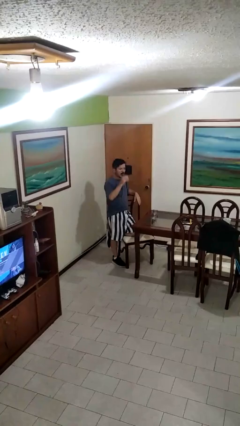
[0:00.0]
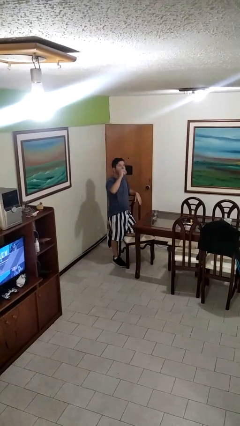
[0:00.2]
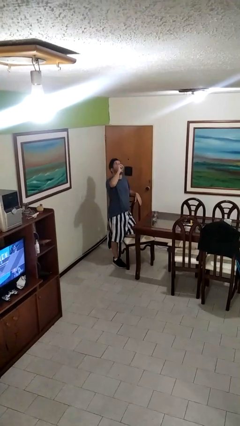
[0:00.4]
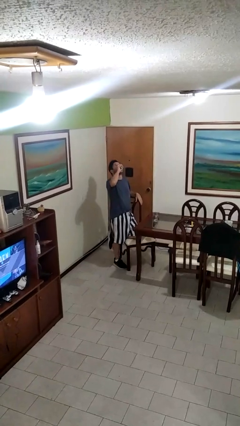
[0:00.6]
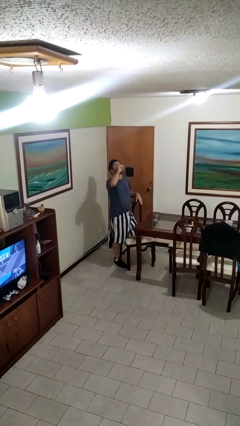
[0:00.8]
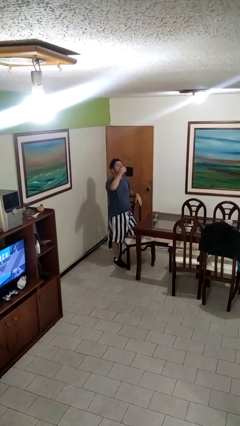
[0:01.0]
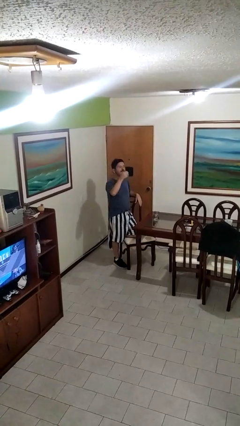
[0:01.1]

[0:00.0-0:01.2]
person drinks from shotglass

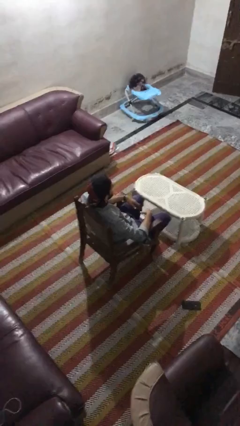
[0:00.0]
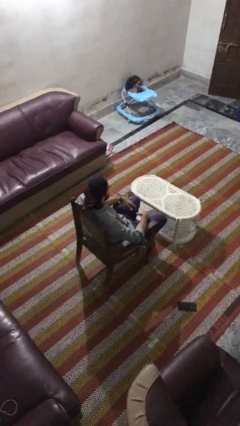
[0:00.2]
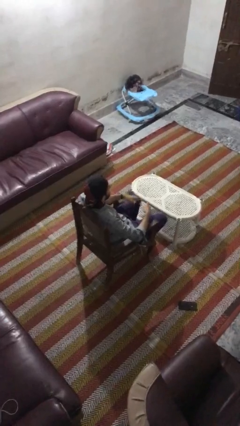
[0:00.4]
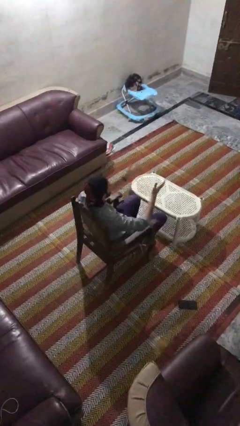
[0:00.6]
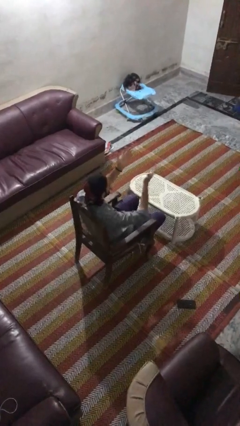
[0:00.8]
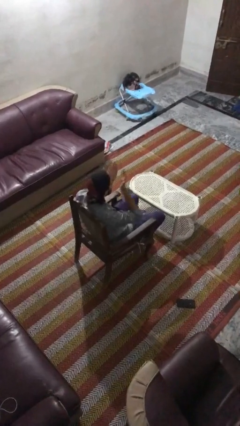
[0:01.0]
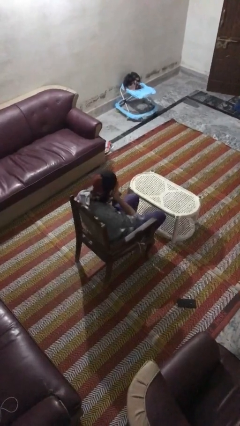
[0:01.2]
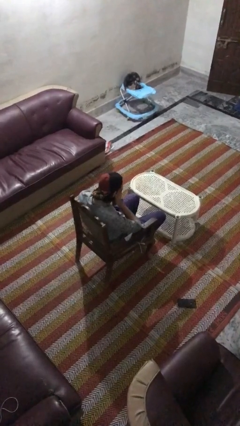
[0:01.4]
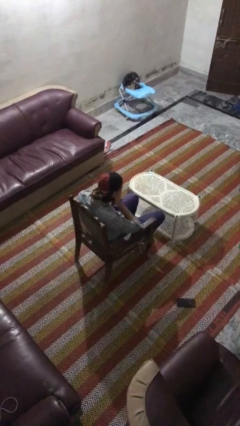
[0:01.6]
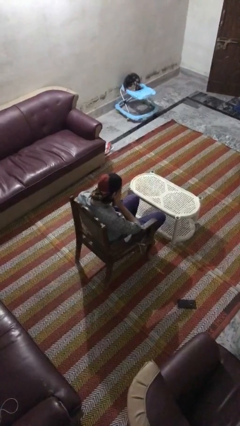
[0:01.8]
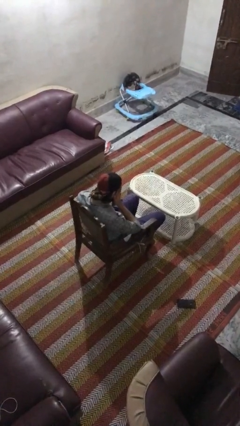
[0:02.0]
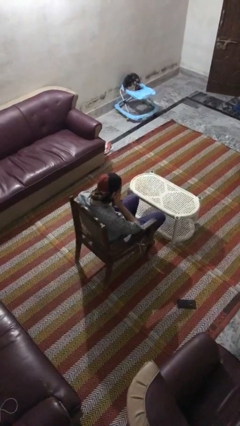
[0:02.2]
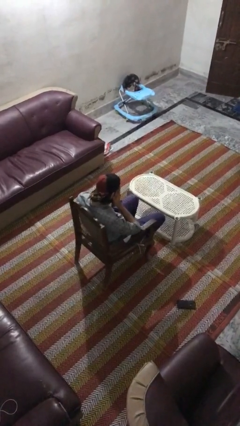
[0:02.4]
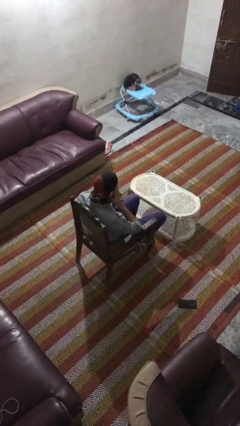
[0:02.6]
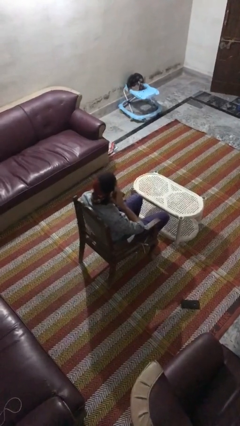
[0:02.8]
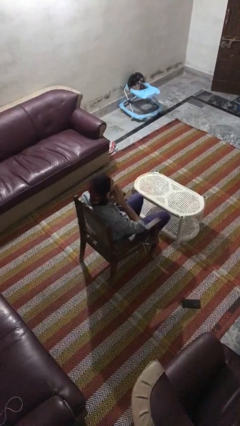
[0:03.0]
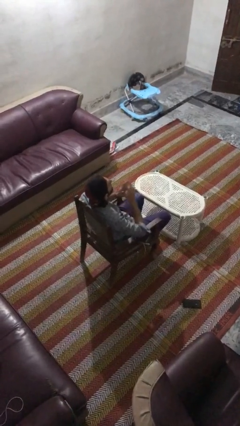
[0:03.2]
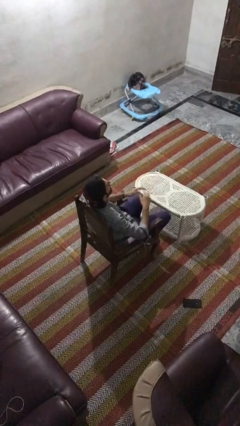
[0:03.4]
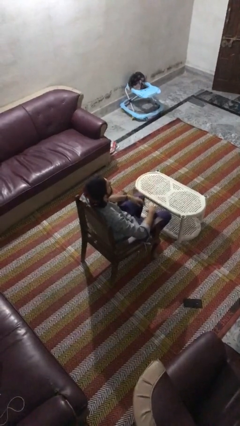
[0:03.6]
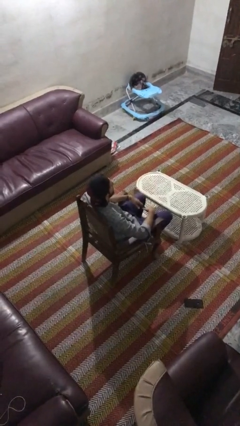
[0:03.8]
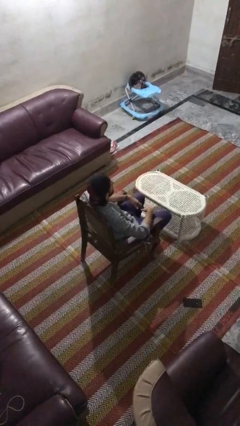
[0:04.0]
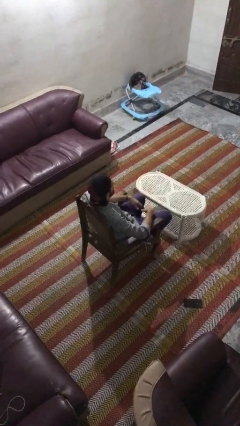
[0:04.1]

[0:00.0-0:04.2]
person covers face with hands

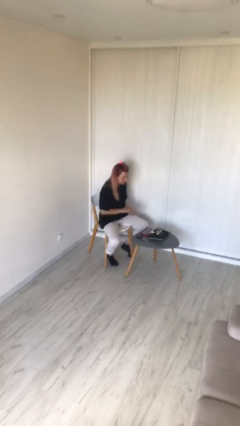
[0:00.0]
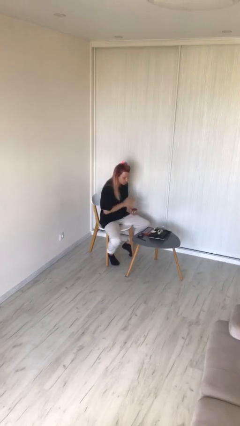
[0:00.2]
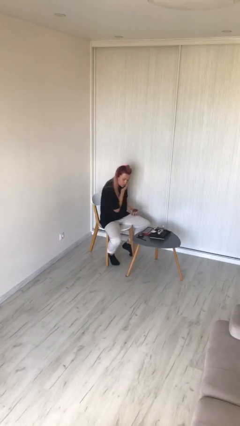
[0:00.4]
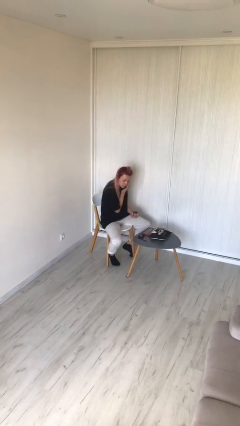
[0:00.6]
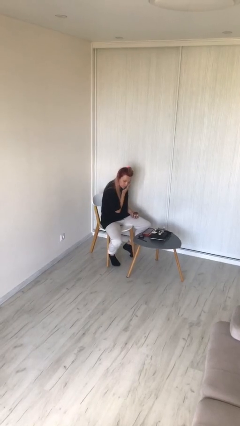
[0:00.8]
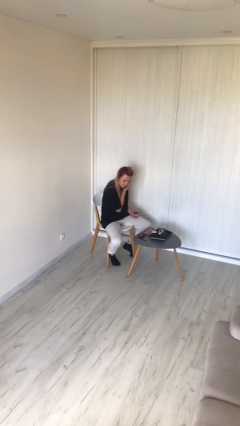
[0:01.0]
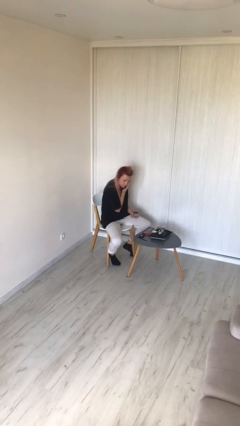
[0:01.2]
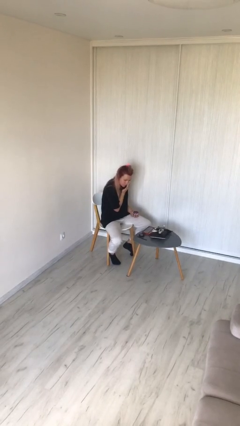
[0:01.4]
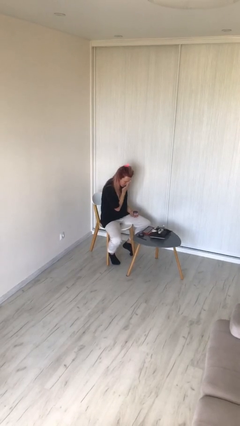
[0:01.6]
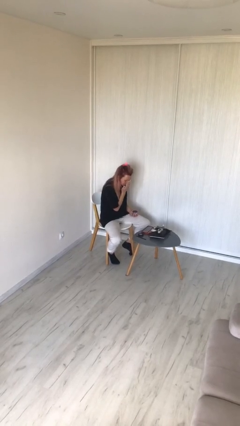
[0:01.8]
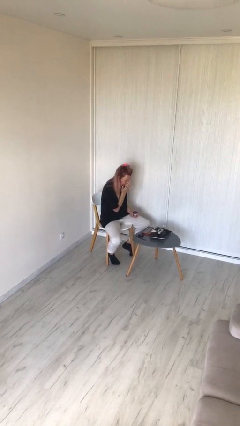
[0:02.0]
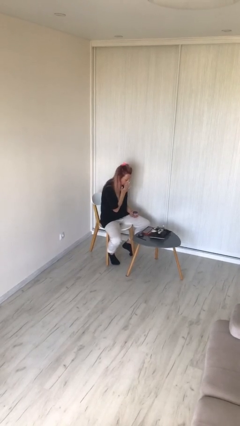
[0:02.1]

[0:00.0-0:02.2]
person applies foundation makeup

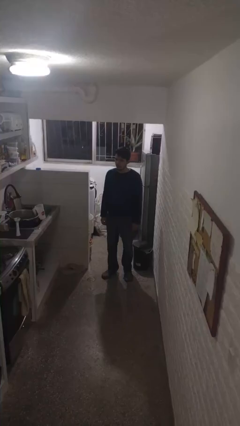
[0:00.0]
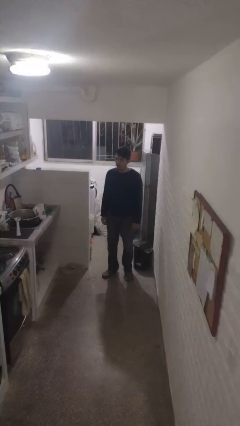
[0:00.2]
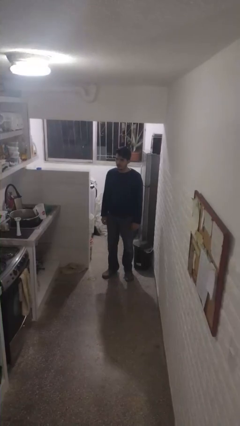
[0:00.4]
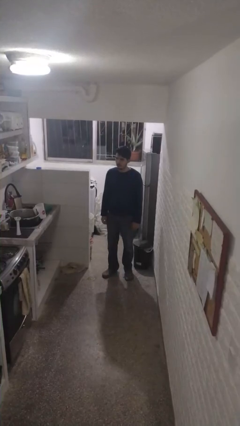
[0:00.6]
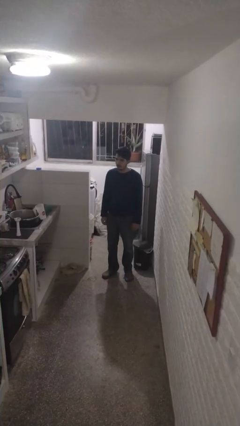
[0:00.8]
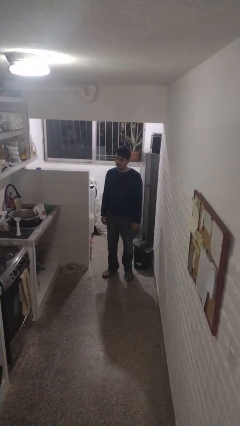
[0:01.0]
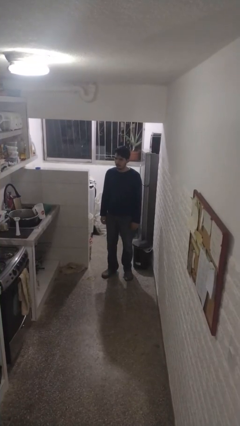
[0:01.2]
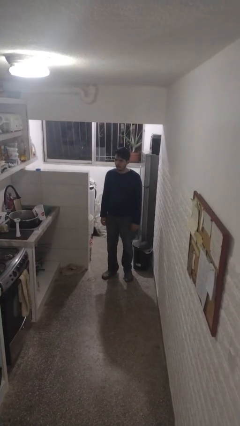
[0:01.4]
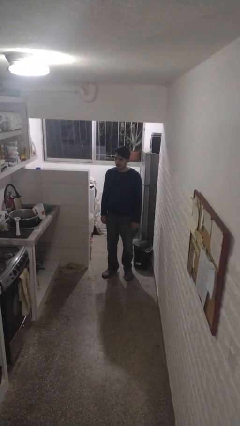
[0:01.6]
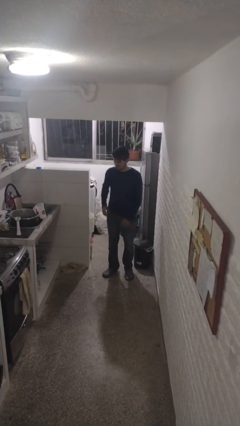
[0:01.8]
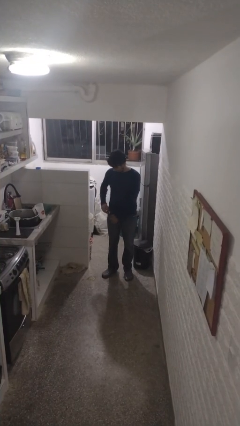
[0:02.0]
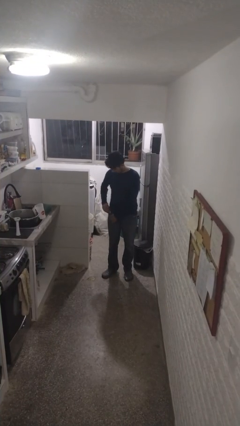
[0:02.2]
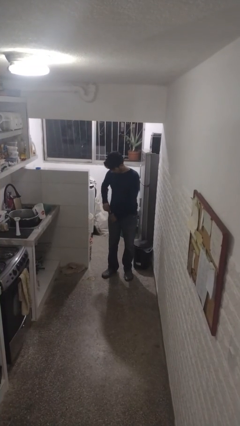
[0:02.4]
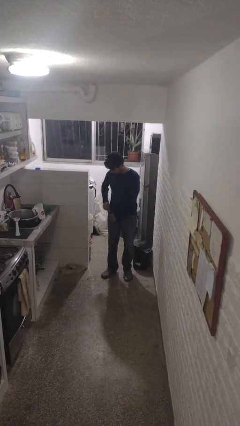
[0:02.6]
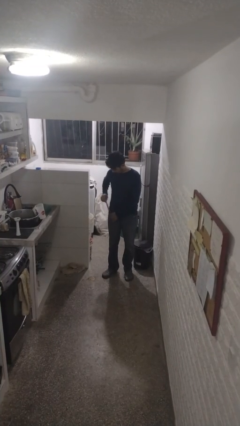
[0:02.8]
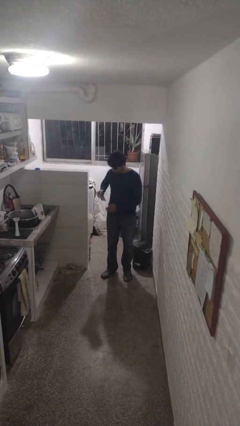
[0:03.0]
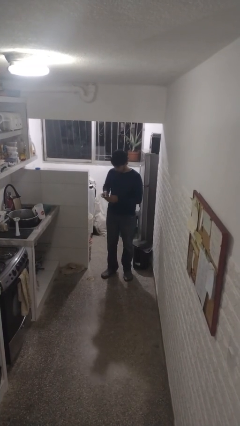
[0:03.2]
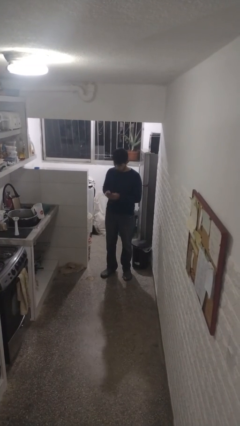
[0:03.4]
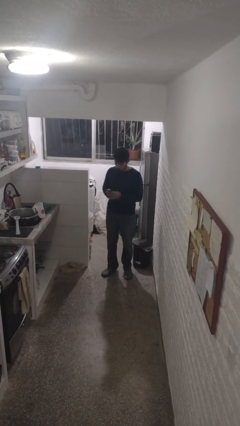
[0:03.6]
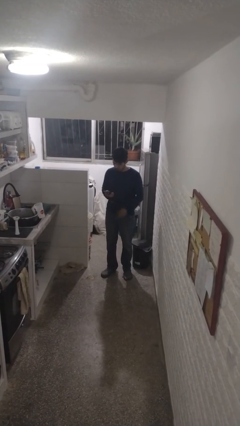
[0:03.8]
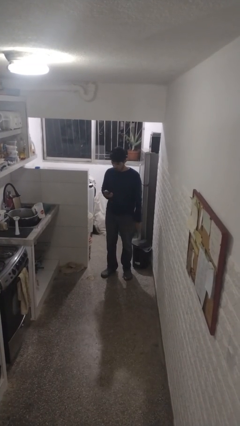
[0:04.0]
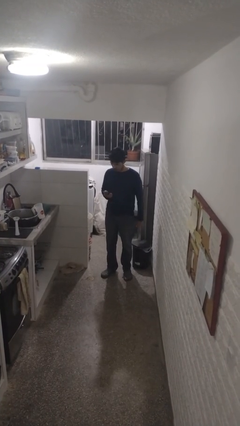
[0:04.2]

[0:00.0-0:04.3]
person takes phone from pocket

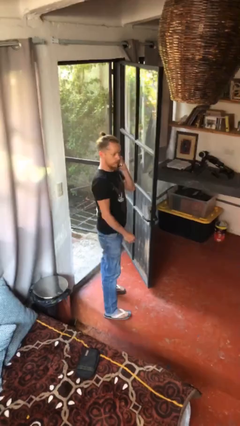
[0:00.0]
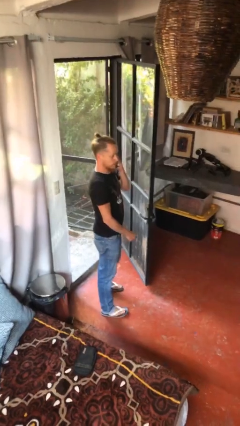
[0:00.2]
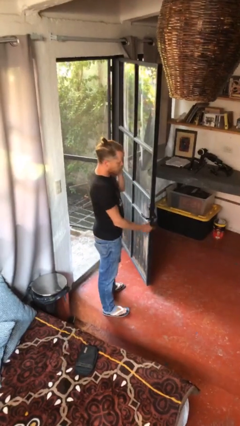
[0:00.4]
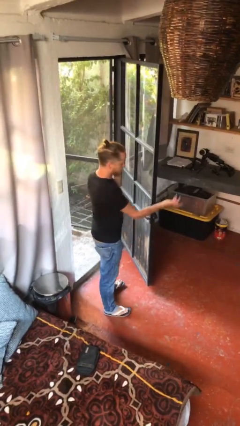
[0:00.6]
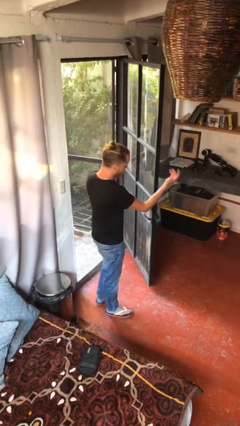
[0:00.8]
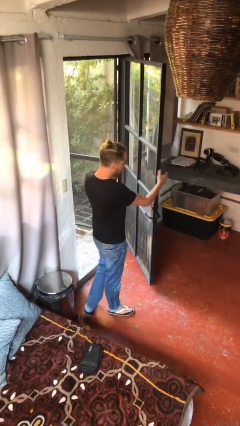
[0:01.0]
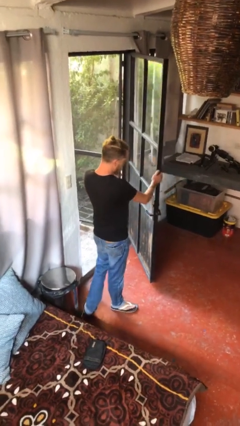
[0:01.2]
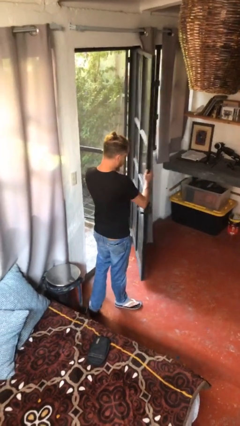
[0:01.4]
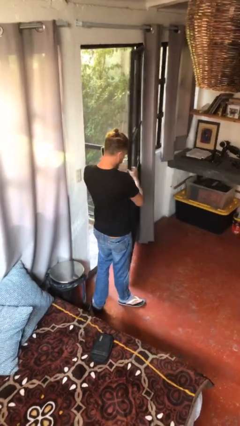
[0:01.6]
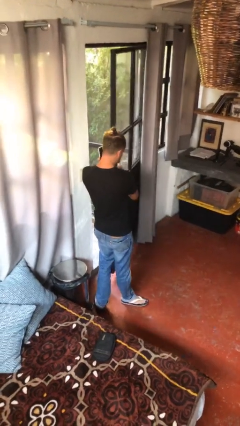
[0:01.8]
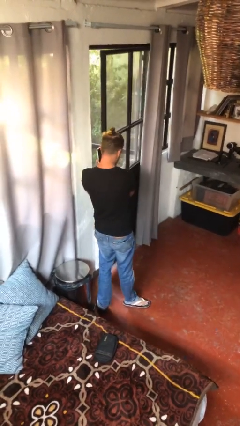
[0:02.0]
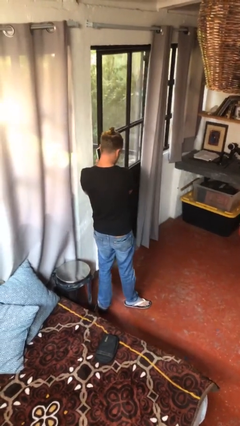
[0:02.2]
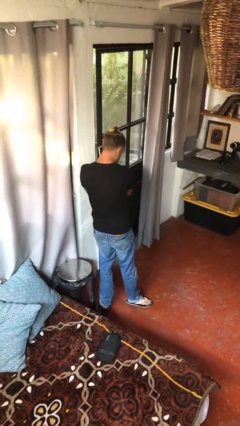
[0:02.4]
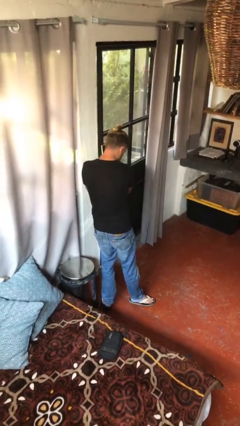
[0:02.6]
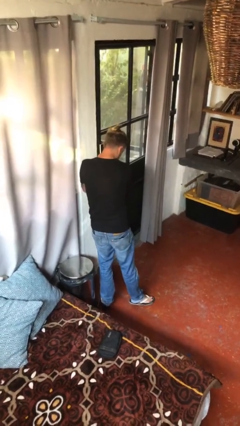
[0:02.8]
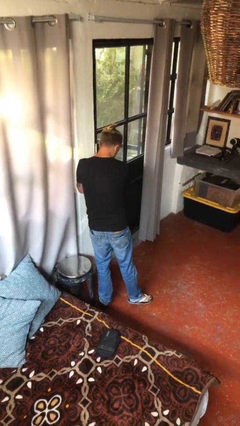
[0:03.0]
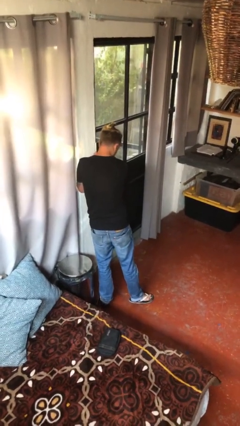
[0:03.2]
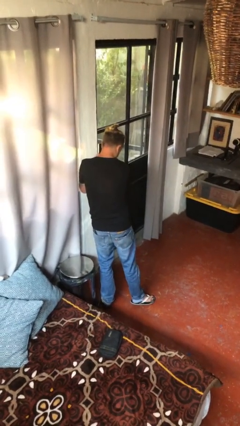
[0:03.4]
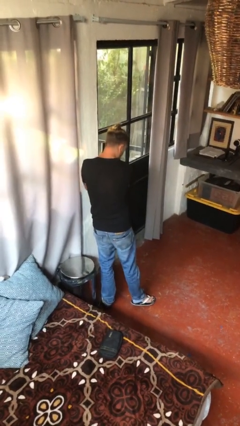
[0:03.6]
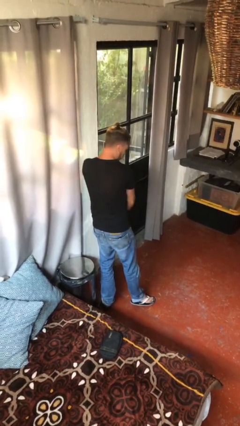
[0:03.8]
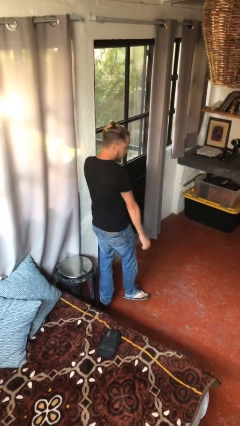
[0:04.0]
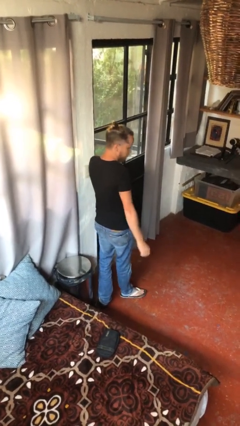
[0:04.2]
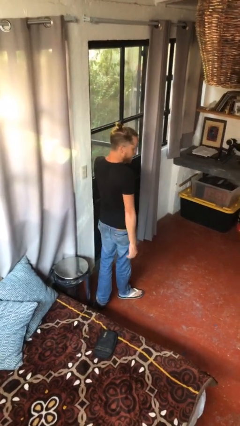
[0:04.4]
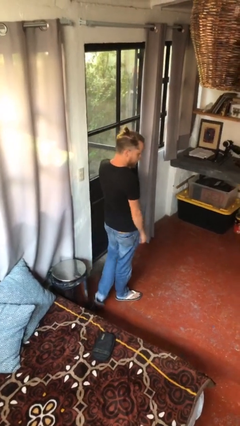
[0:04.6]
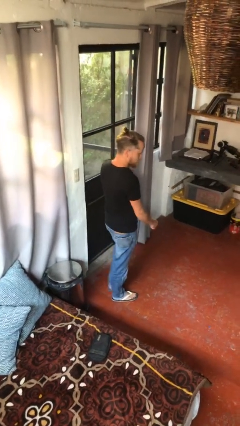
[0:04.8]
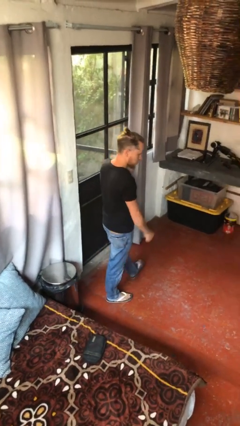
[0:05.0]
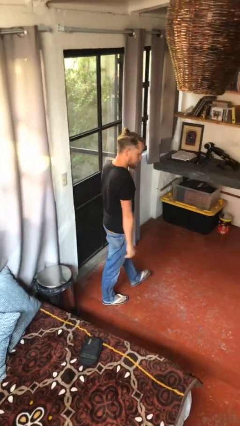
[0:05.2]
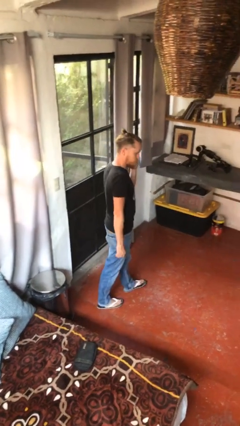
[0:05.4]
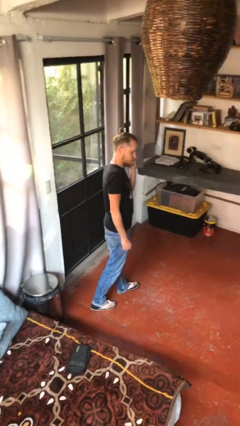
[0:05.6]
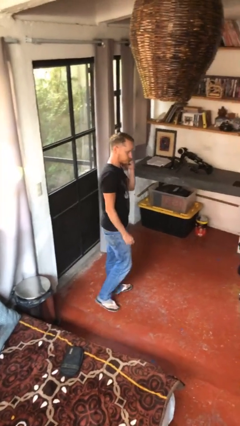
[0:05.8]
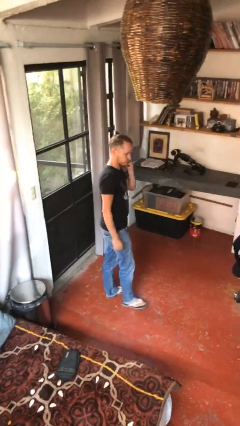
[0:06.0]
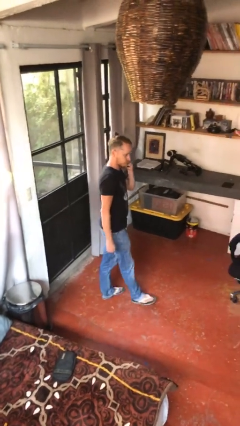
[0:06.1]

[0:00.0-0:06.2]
person closes facility door
